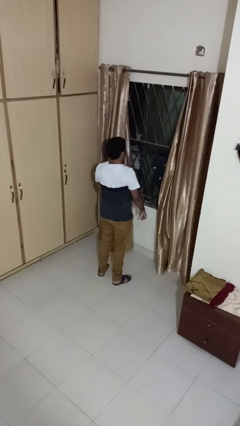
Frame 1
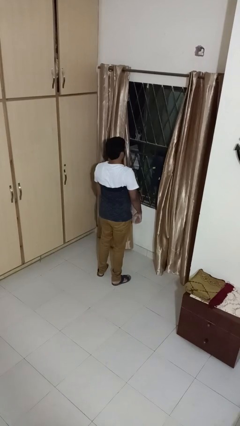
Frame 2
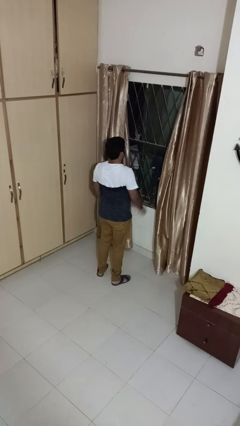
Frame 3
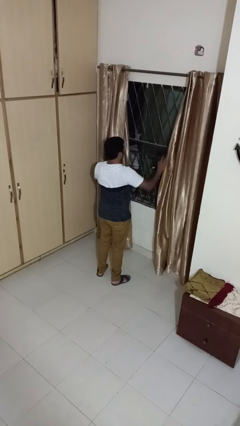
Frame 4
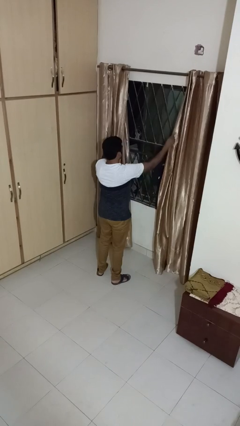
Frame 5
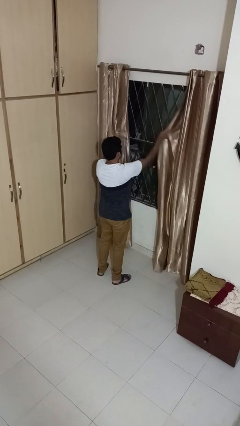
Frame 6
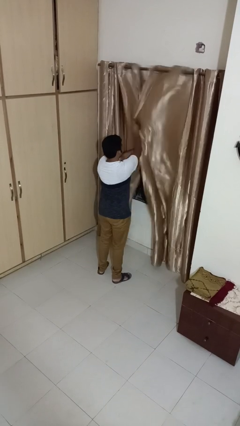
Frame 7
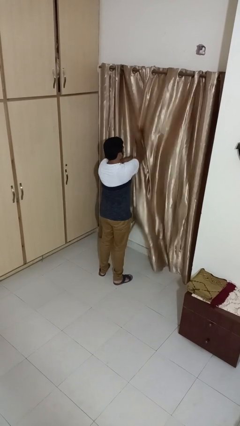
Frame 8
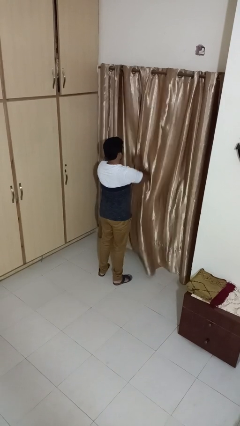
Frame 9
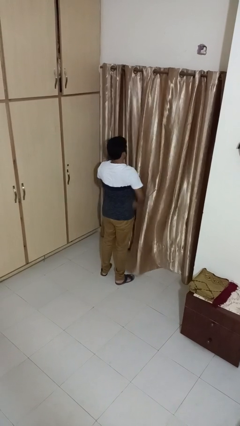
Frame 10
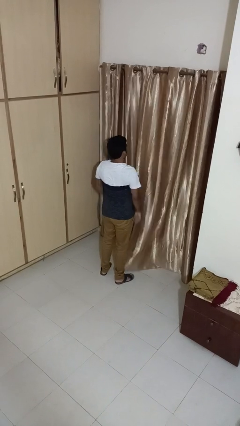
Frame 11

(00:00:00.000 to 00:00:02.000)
person closes curtains

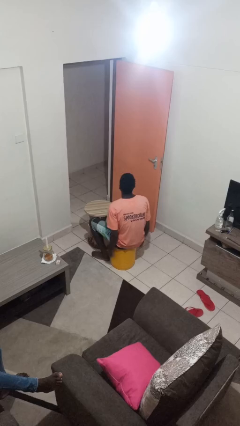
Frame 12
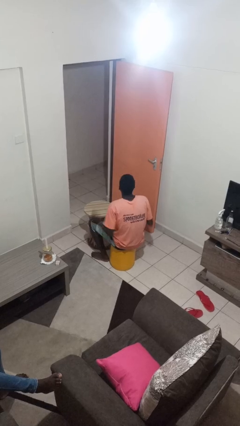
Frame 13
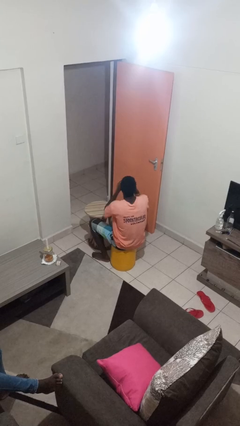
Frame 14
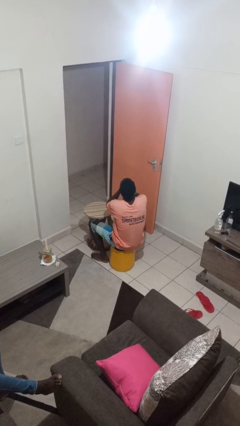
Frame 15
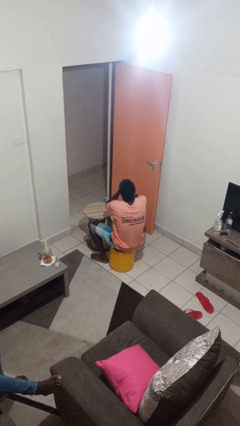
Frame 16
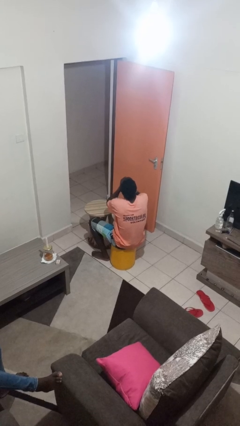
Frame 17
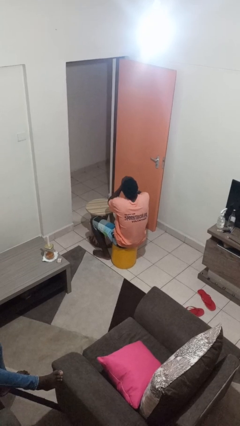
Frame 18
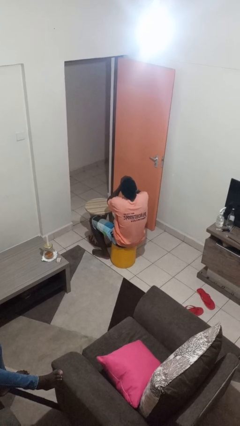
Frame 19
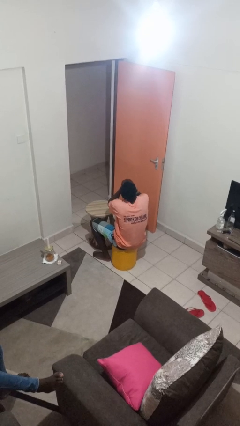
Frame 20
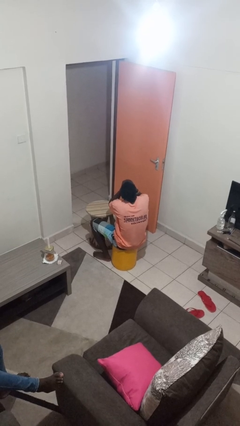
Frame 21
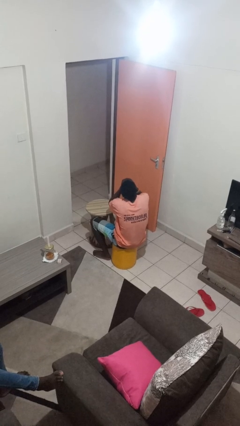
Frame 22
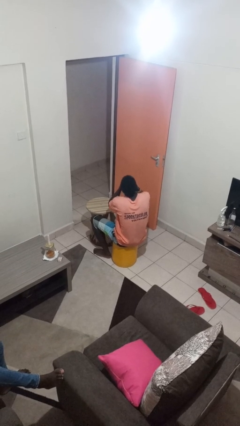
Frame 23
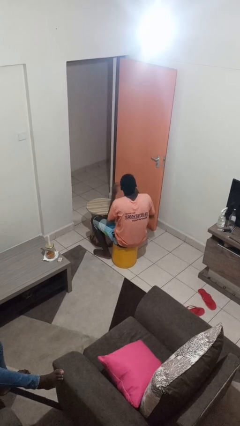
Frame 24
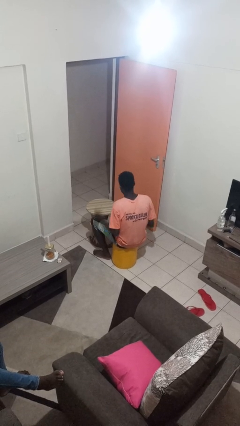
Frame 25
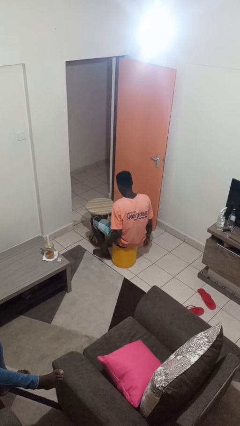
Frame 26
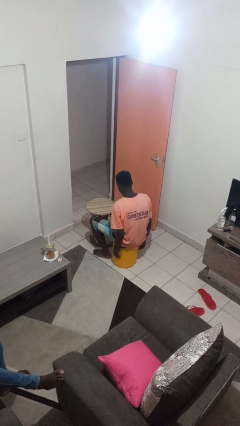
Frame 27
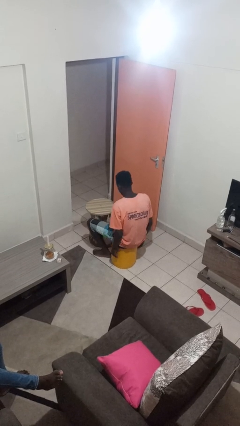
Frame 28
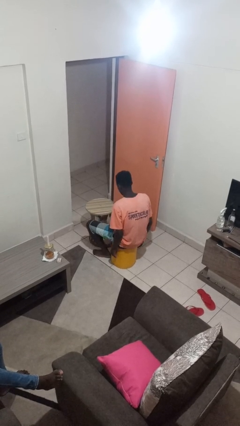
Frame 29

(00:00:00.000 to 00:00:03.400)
person yawns

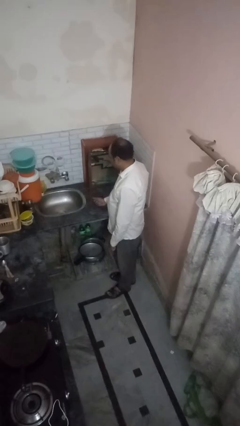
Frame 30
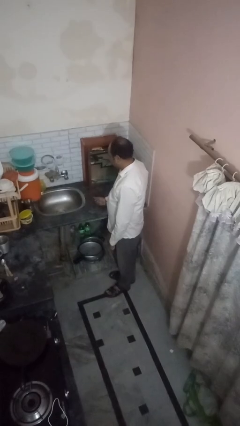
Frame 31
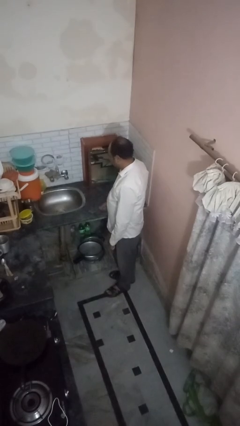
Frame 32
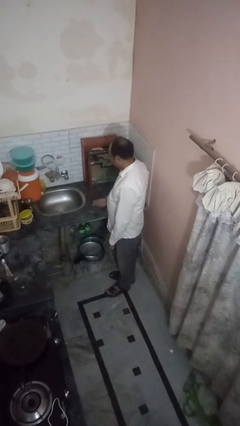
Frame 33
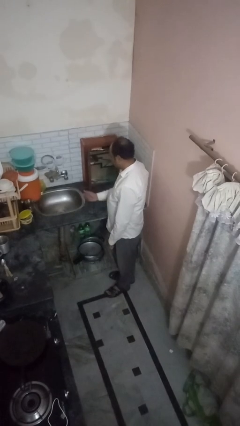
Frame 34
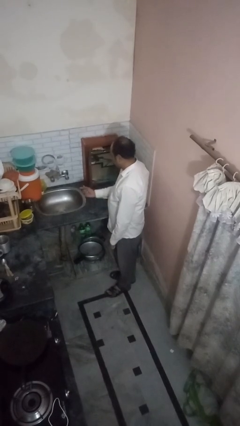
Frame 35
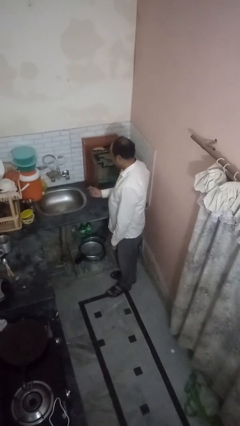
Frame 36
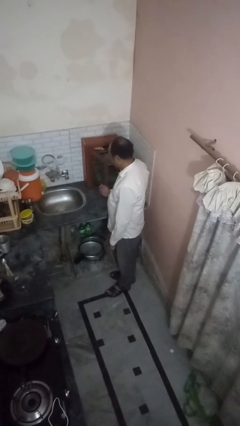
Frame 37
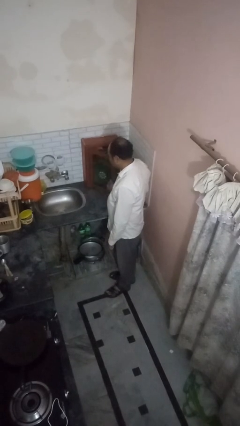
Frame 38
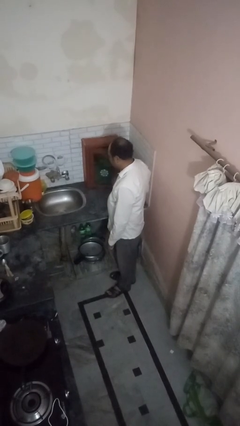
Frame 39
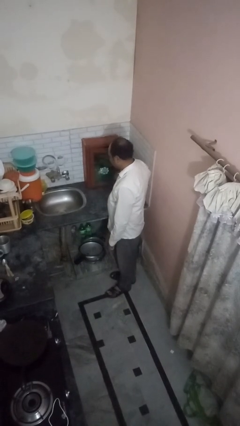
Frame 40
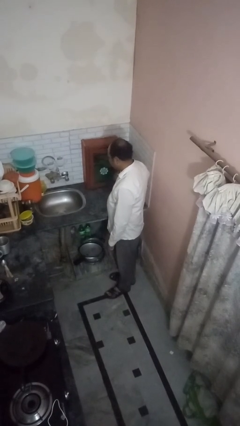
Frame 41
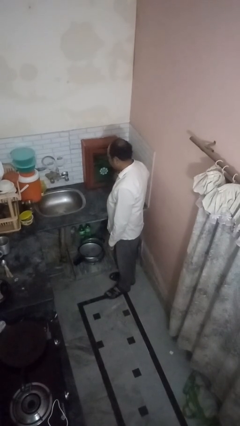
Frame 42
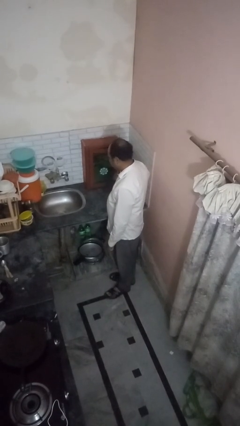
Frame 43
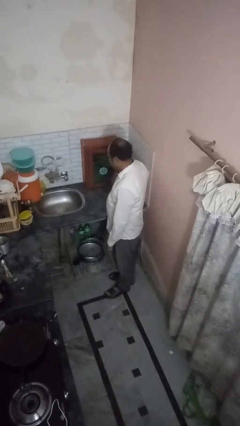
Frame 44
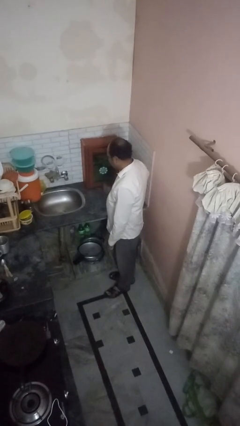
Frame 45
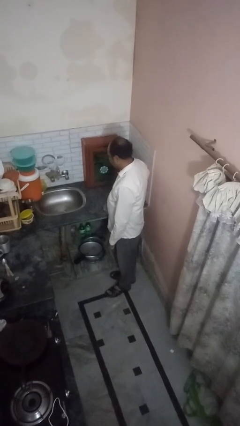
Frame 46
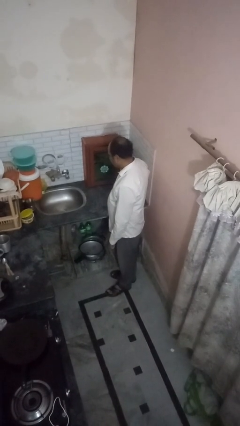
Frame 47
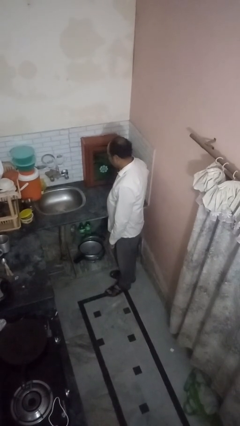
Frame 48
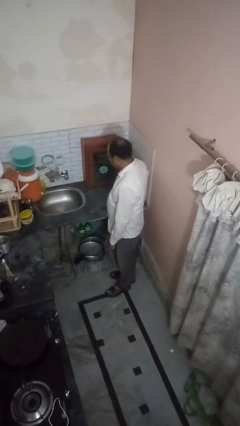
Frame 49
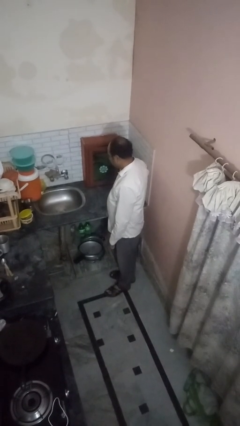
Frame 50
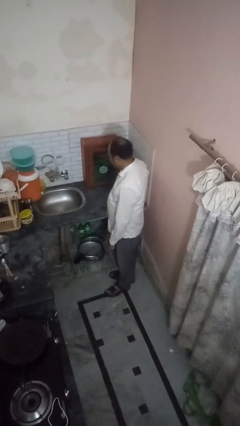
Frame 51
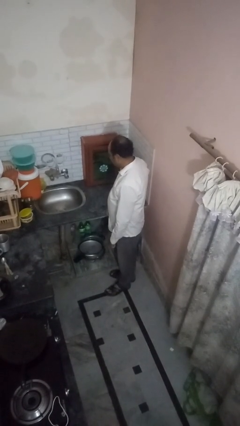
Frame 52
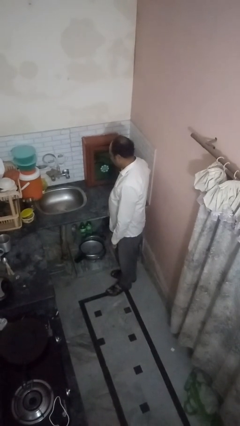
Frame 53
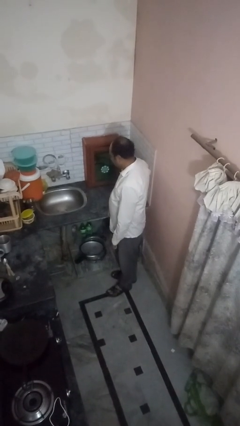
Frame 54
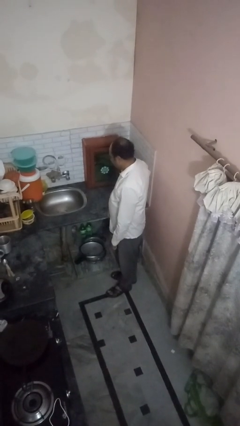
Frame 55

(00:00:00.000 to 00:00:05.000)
person closes kitchen drawer

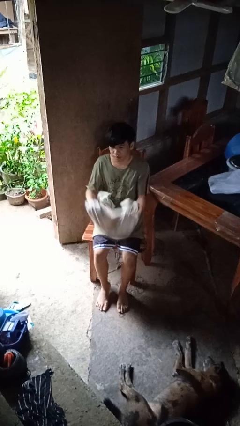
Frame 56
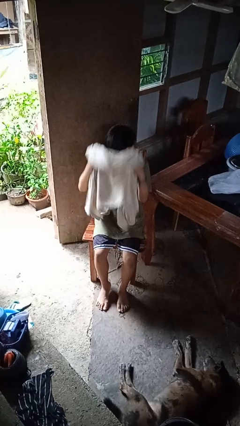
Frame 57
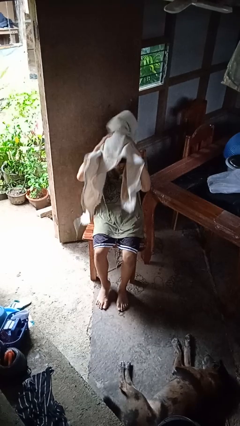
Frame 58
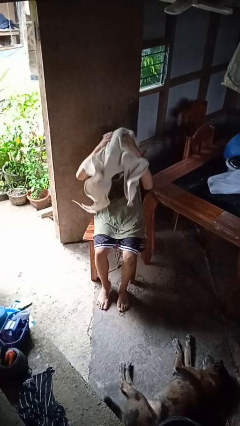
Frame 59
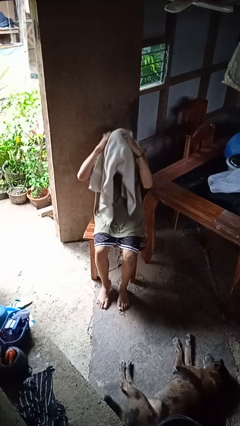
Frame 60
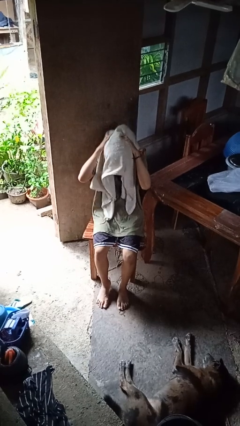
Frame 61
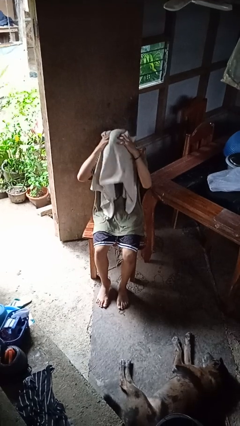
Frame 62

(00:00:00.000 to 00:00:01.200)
person dries hair with towel

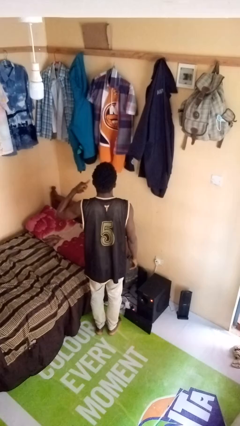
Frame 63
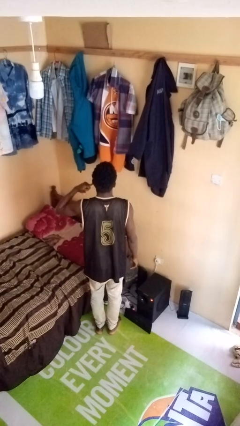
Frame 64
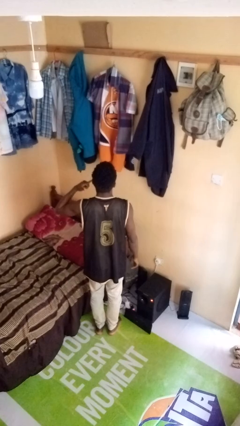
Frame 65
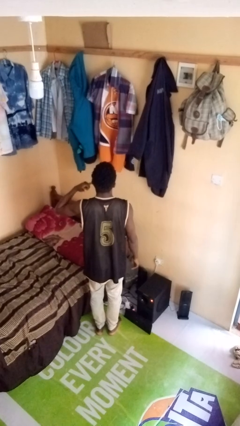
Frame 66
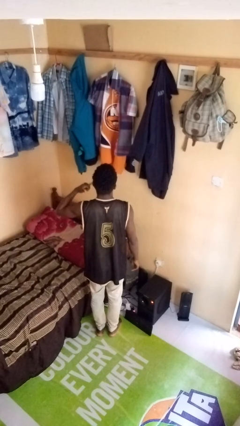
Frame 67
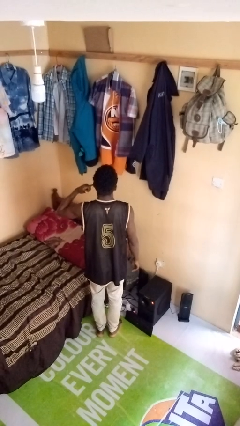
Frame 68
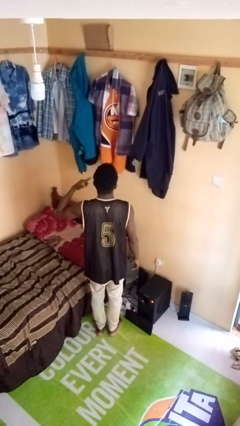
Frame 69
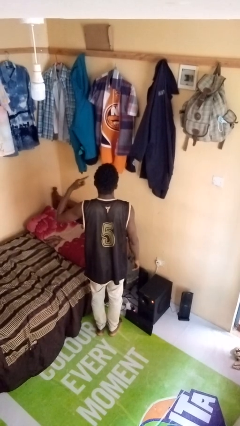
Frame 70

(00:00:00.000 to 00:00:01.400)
person gestures listen closely

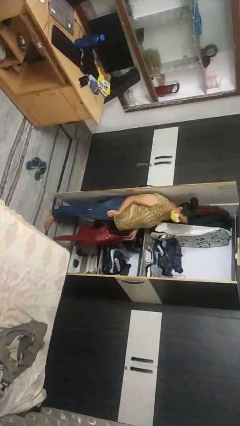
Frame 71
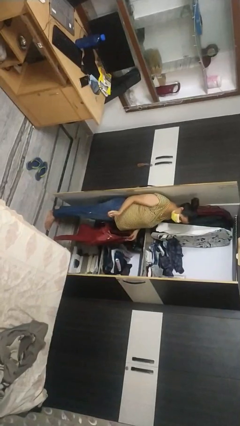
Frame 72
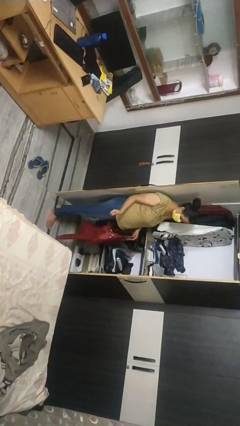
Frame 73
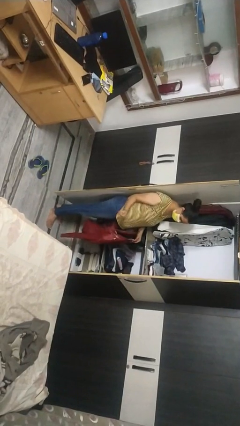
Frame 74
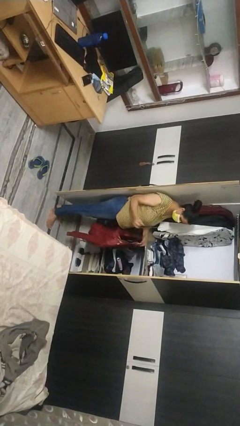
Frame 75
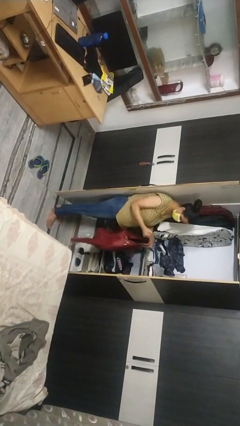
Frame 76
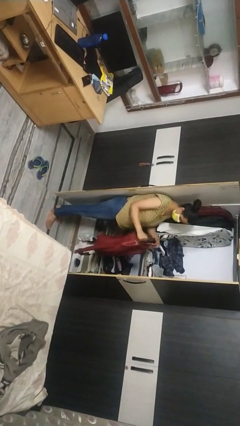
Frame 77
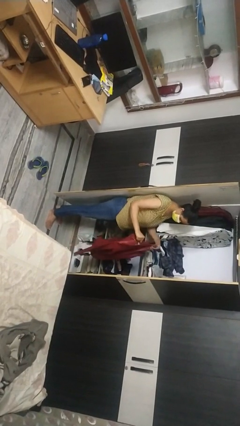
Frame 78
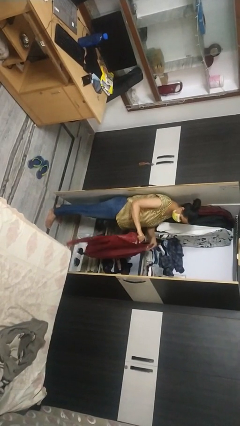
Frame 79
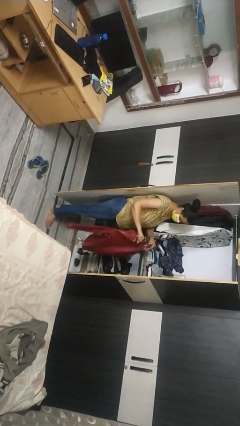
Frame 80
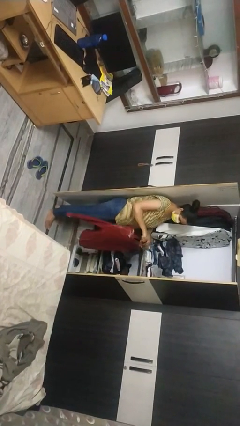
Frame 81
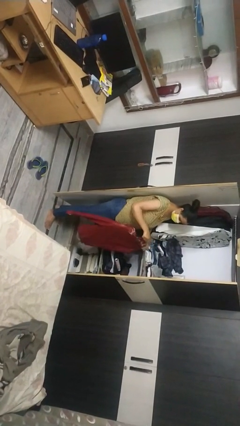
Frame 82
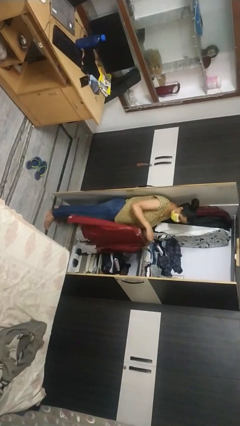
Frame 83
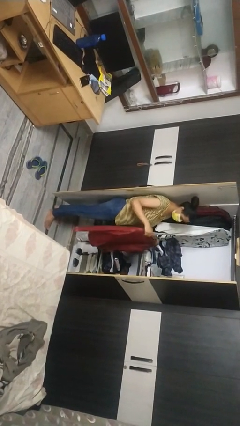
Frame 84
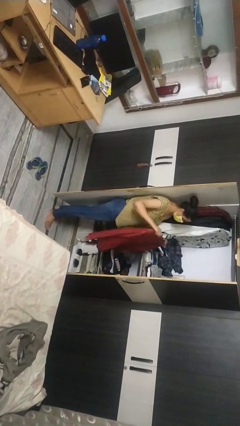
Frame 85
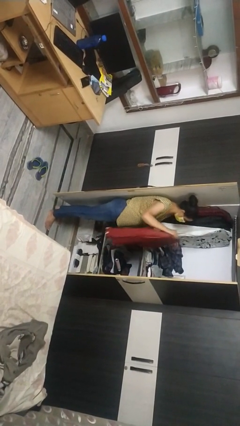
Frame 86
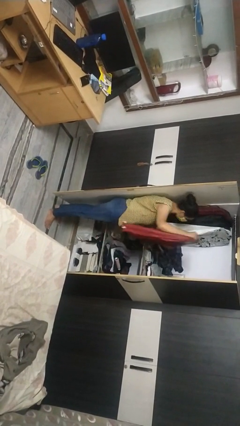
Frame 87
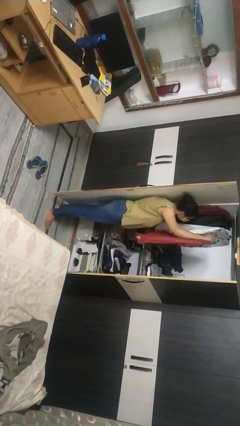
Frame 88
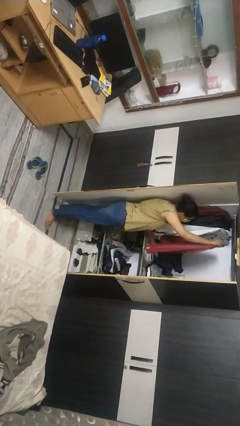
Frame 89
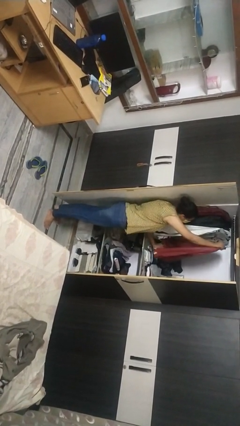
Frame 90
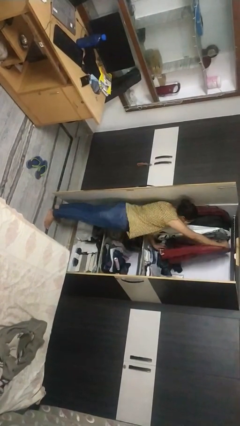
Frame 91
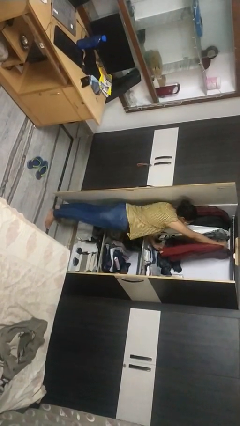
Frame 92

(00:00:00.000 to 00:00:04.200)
person puts clothes into closet
